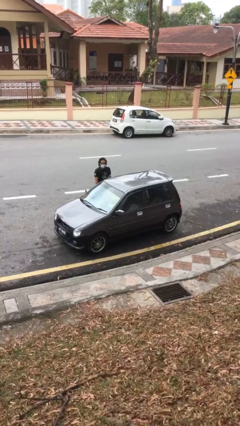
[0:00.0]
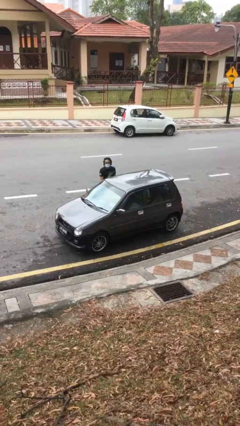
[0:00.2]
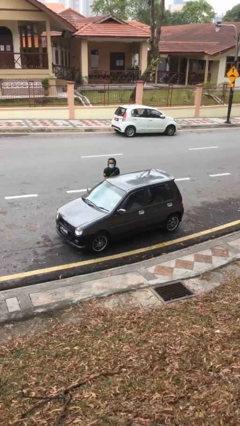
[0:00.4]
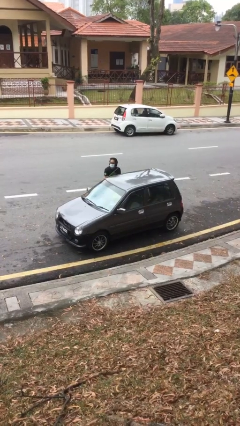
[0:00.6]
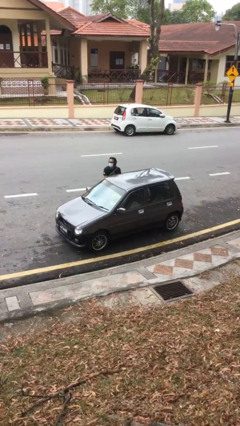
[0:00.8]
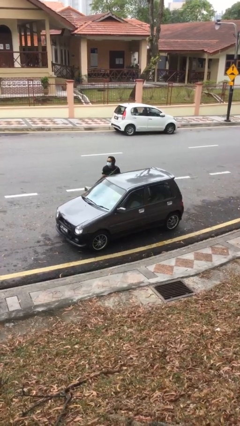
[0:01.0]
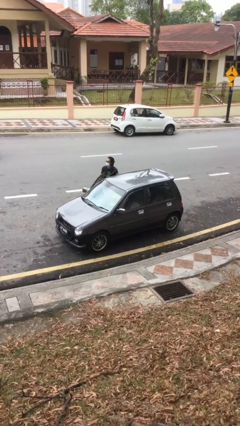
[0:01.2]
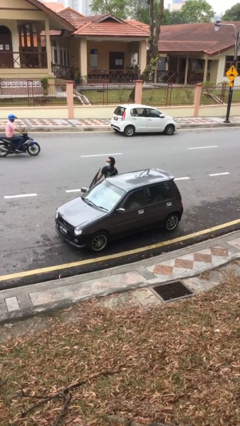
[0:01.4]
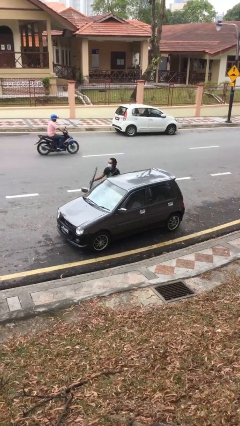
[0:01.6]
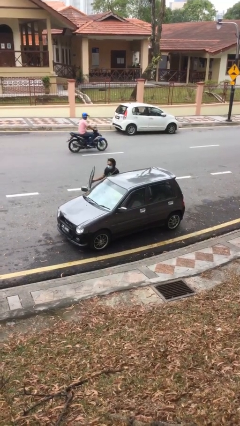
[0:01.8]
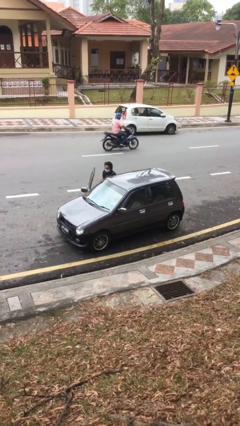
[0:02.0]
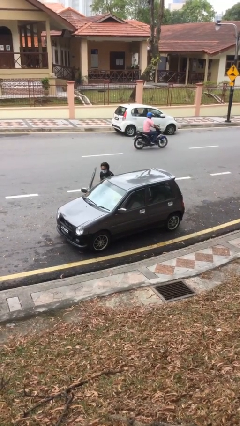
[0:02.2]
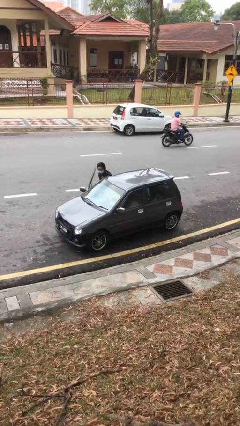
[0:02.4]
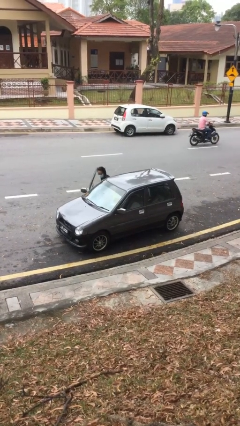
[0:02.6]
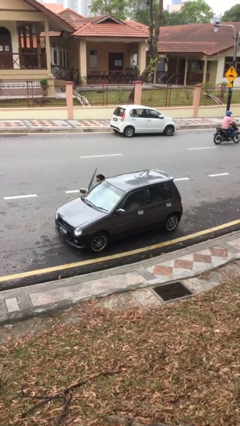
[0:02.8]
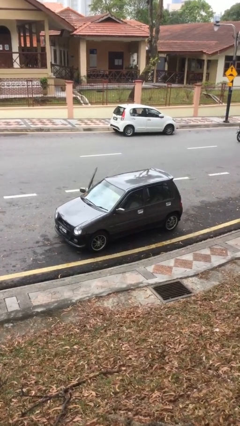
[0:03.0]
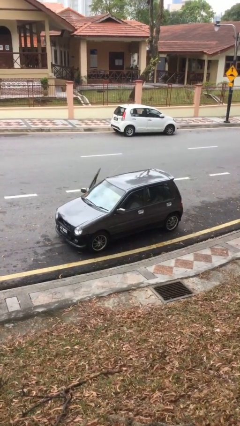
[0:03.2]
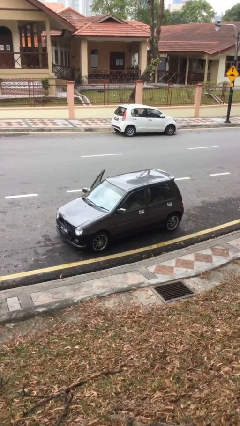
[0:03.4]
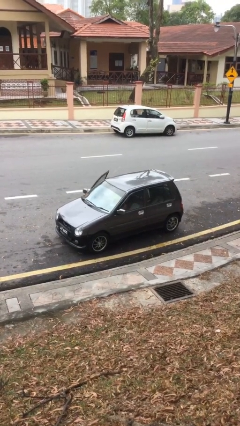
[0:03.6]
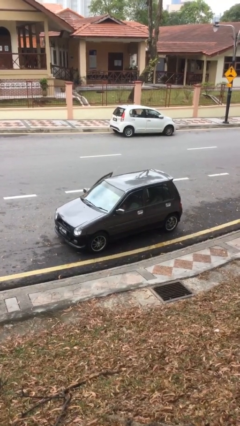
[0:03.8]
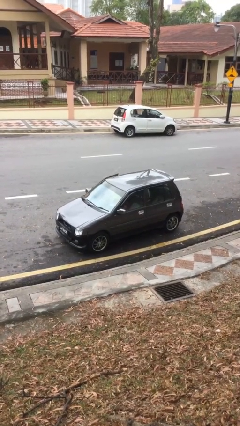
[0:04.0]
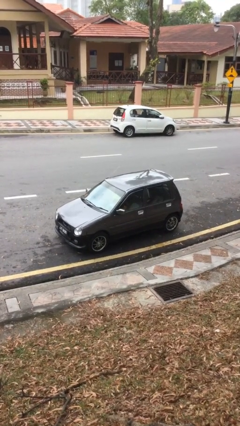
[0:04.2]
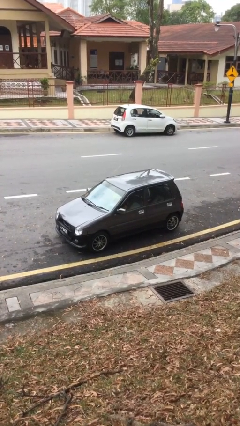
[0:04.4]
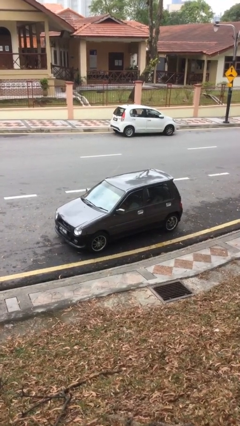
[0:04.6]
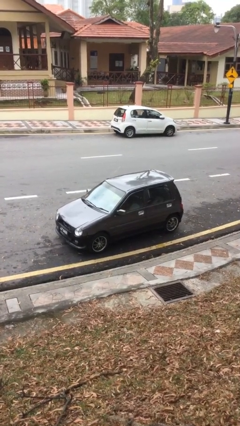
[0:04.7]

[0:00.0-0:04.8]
car picks up person

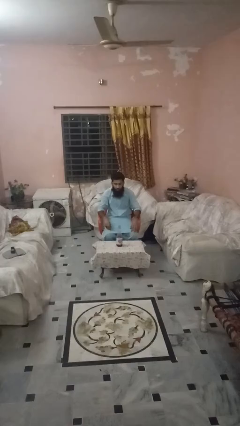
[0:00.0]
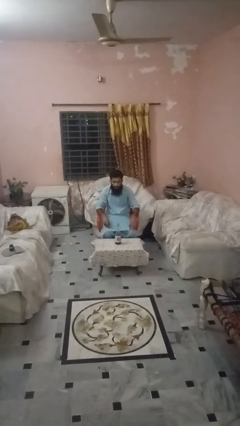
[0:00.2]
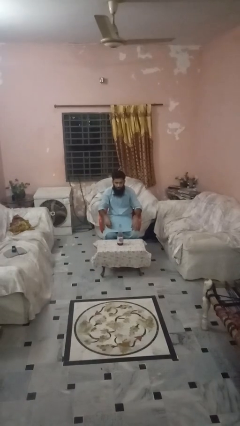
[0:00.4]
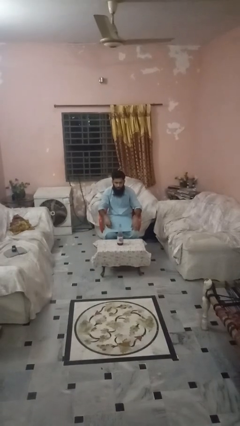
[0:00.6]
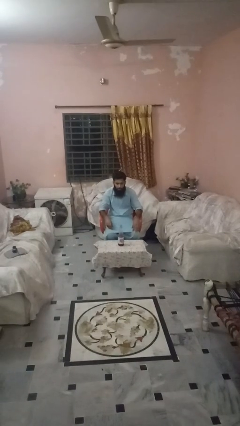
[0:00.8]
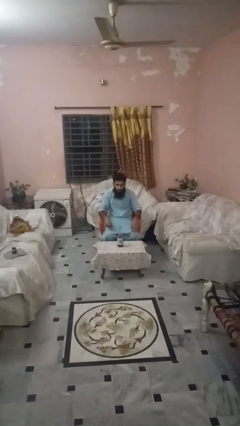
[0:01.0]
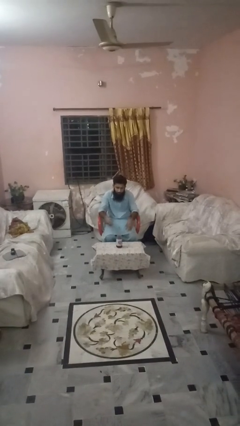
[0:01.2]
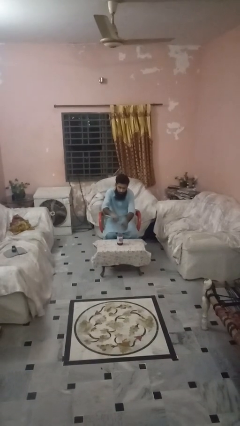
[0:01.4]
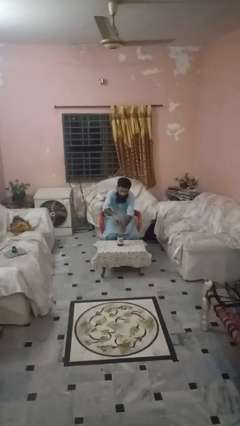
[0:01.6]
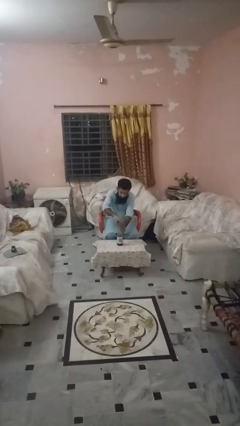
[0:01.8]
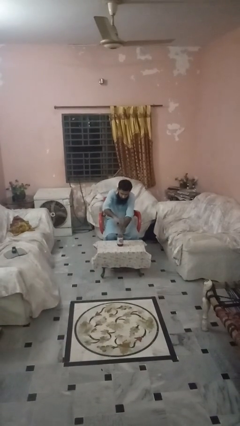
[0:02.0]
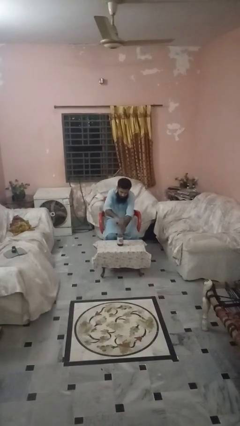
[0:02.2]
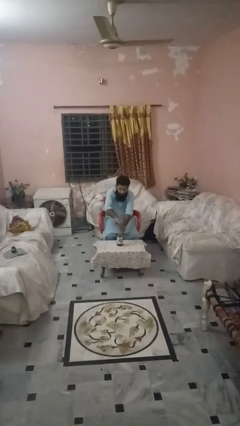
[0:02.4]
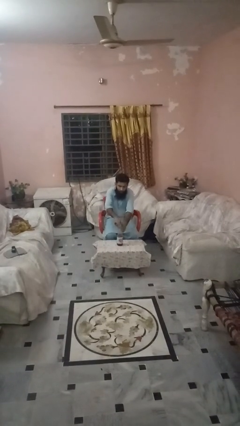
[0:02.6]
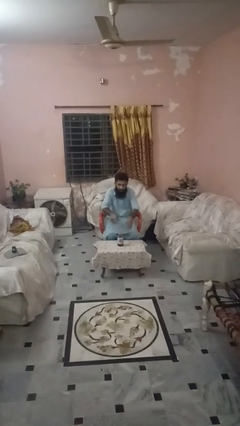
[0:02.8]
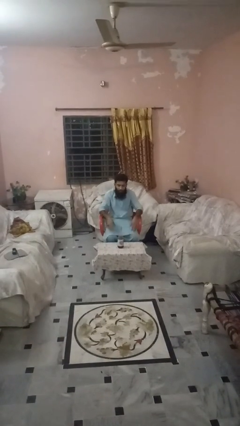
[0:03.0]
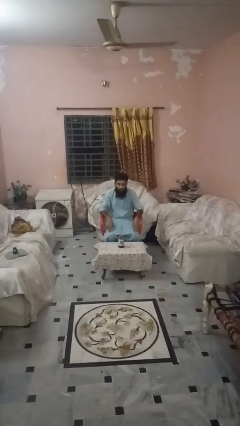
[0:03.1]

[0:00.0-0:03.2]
person screws lid to bottle

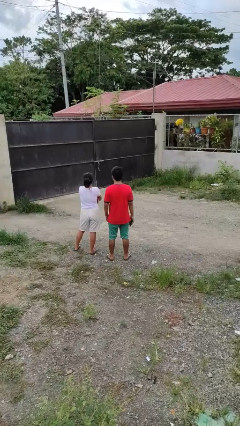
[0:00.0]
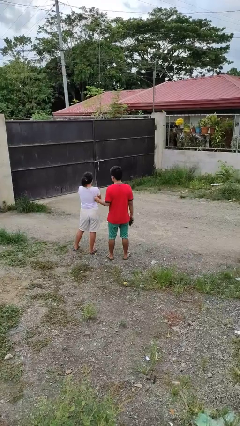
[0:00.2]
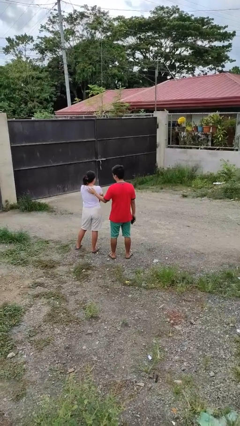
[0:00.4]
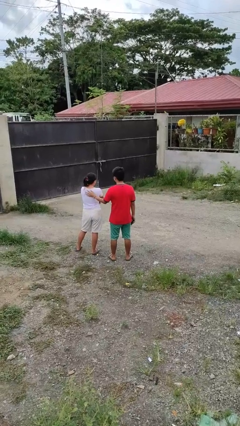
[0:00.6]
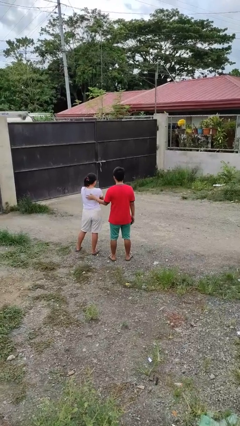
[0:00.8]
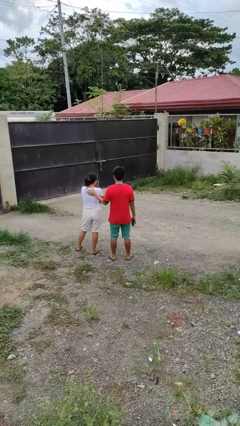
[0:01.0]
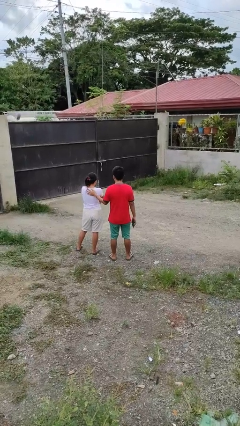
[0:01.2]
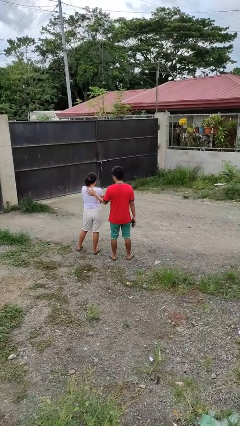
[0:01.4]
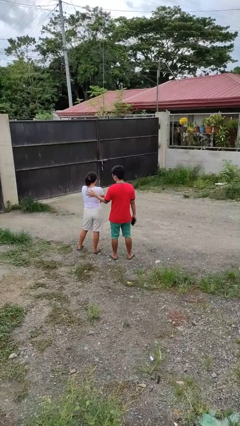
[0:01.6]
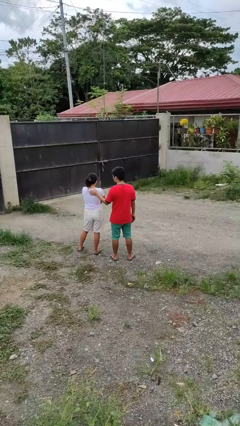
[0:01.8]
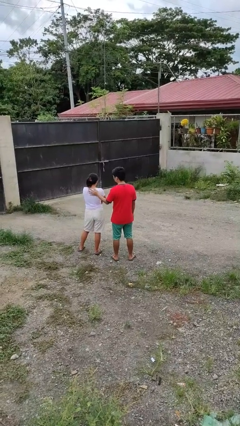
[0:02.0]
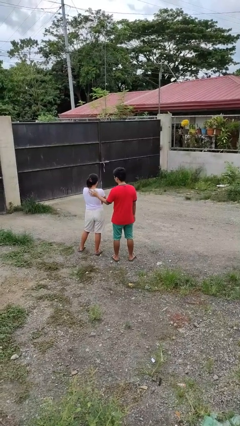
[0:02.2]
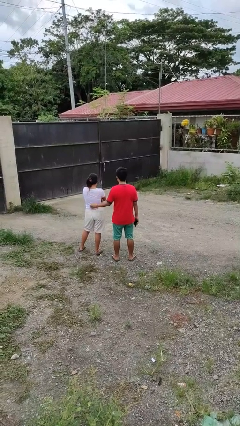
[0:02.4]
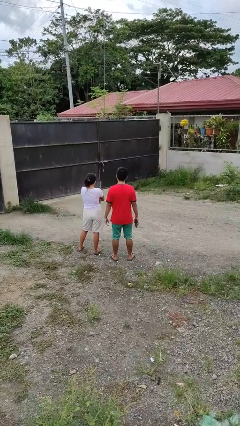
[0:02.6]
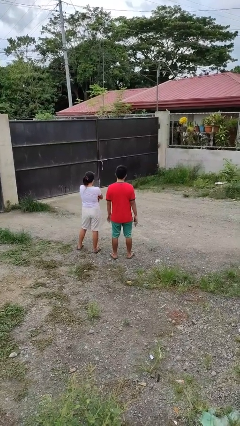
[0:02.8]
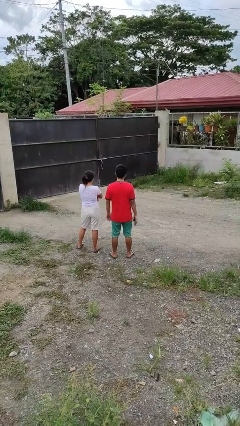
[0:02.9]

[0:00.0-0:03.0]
person touches back of person

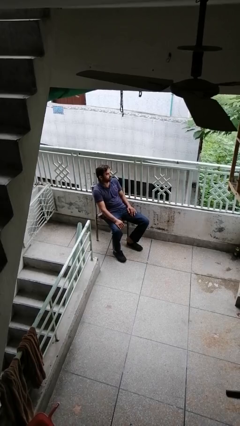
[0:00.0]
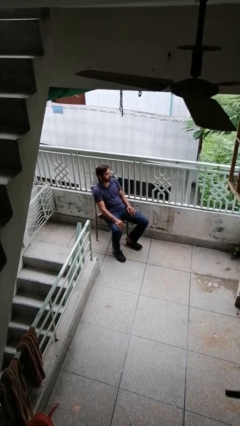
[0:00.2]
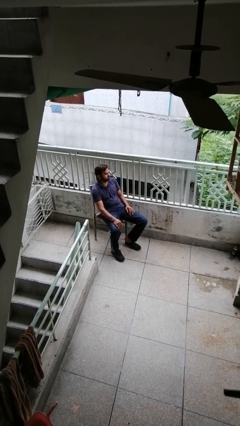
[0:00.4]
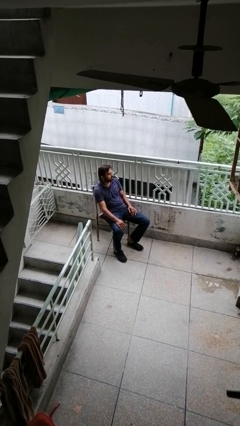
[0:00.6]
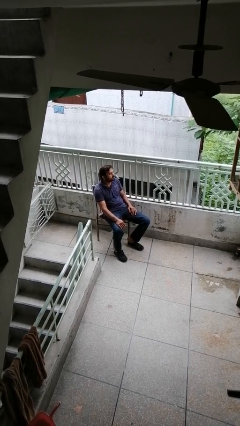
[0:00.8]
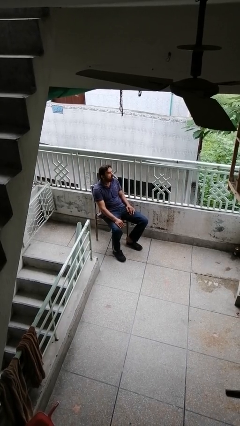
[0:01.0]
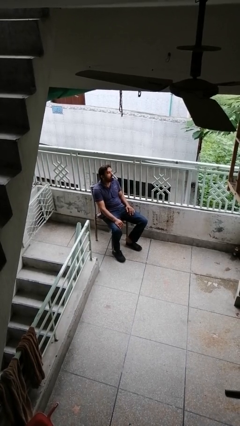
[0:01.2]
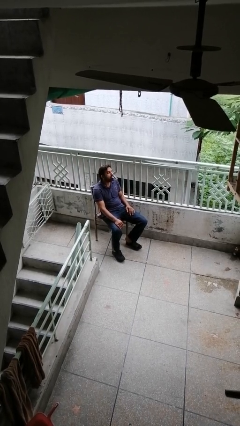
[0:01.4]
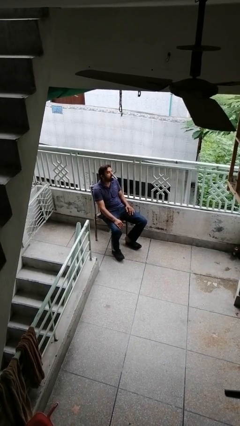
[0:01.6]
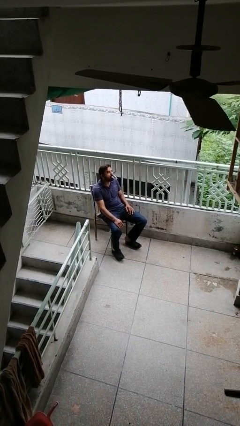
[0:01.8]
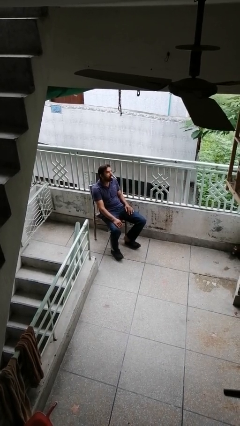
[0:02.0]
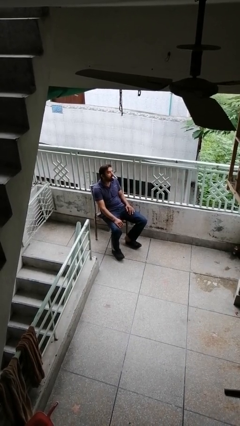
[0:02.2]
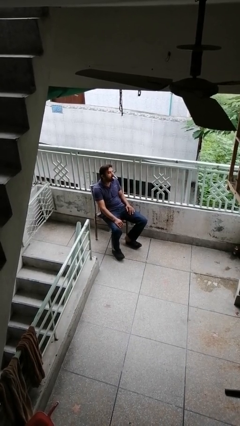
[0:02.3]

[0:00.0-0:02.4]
person sticks out tongue

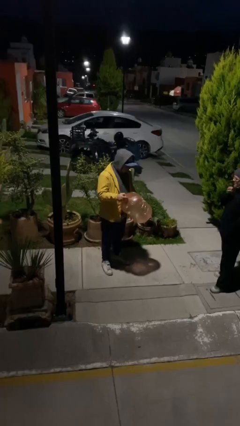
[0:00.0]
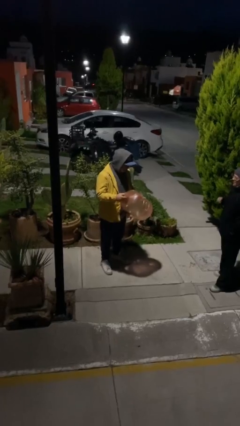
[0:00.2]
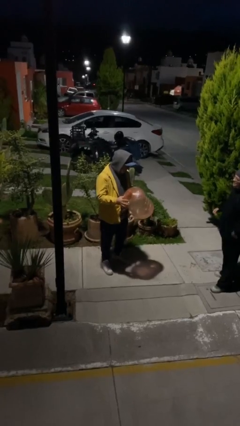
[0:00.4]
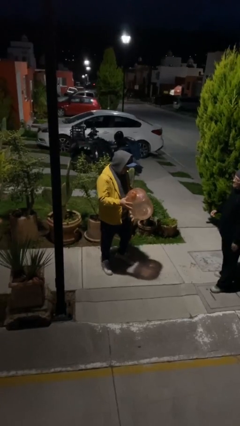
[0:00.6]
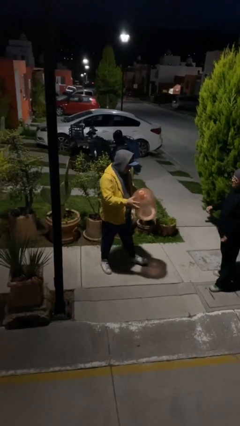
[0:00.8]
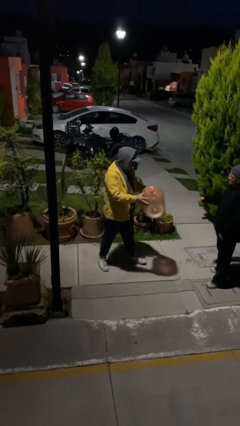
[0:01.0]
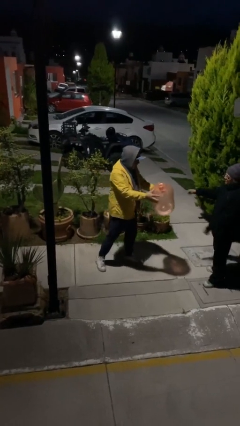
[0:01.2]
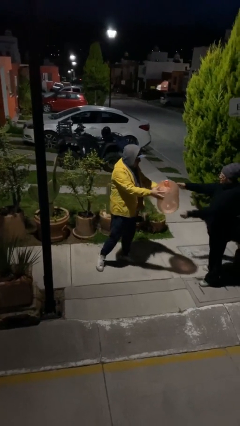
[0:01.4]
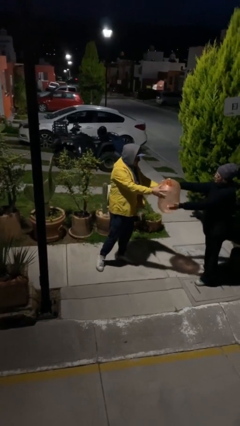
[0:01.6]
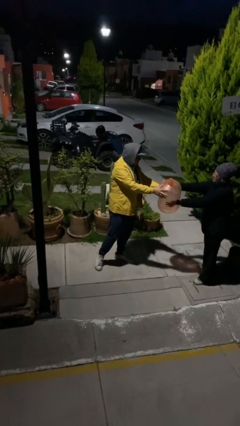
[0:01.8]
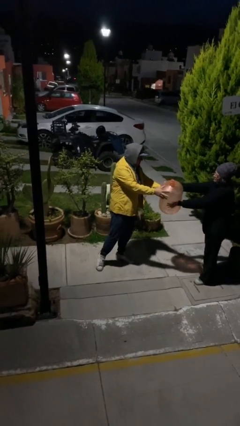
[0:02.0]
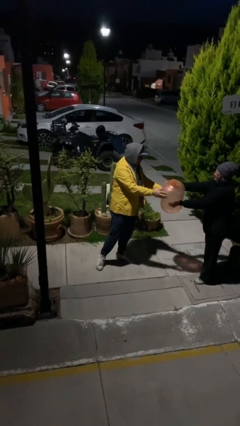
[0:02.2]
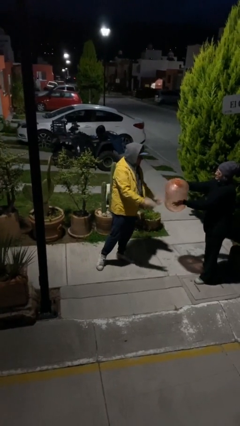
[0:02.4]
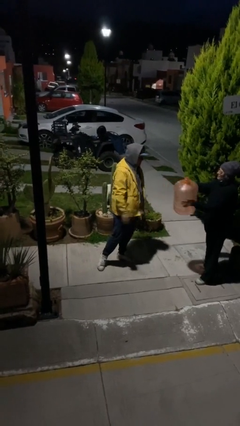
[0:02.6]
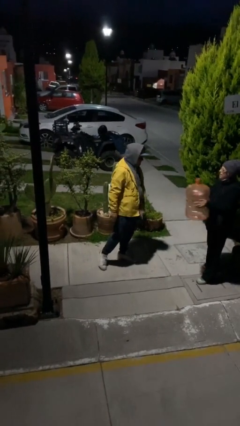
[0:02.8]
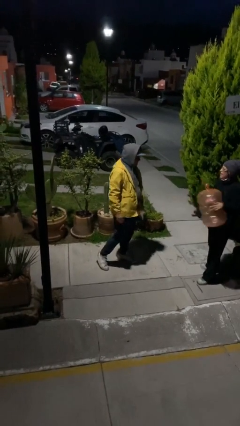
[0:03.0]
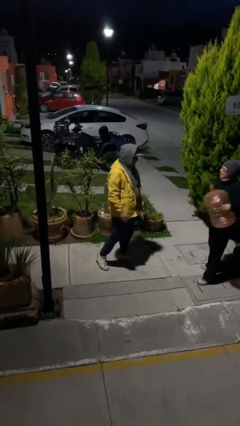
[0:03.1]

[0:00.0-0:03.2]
person transfers object to person

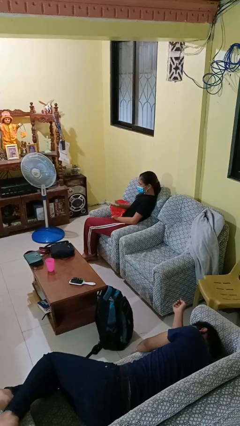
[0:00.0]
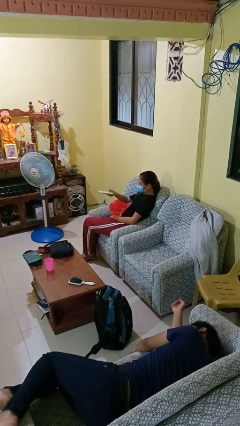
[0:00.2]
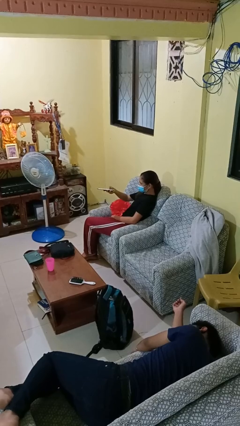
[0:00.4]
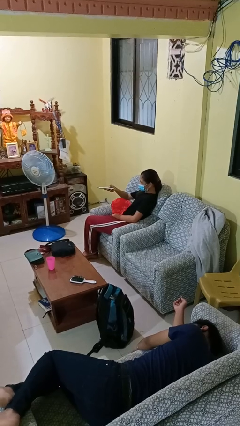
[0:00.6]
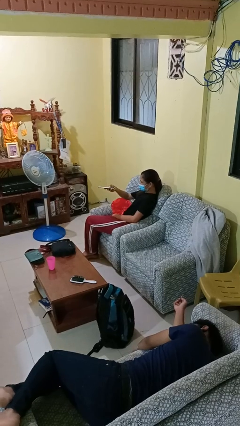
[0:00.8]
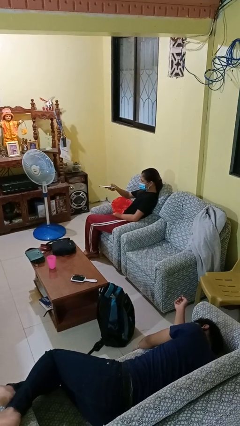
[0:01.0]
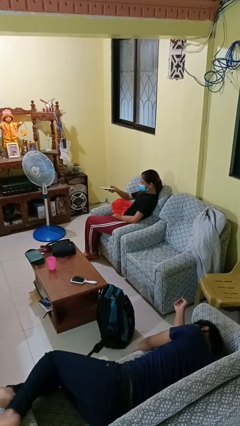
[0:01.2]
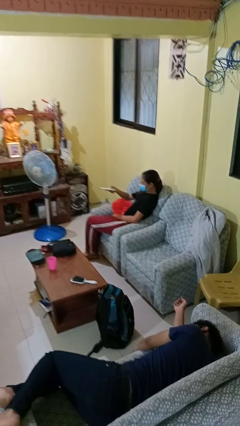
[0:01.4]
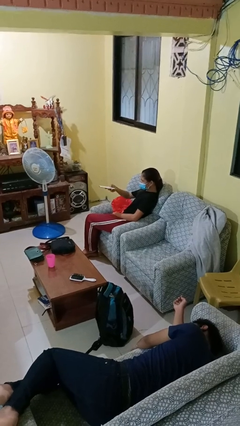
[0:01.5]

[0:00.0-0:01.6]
person uses television remote
